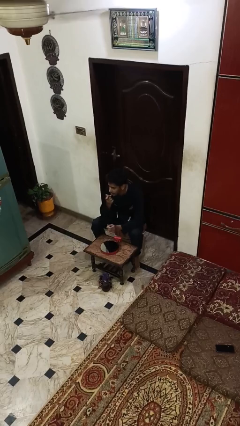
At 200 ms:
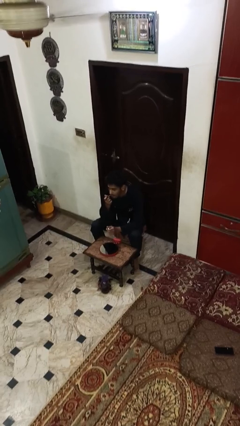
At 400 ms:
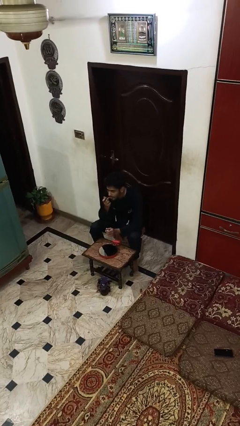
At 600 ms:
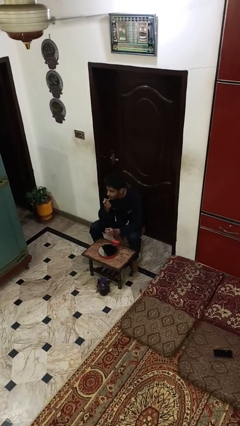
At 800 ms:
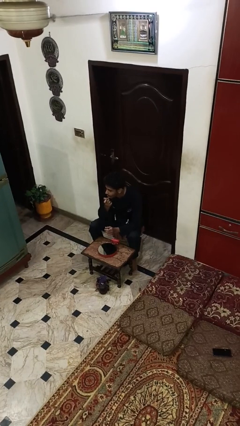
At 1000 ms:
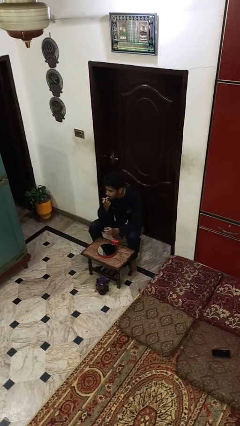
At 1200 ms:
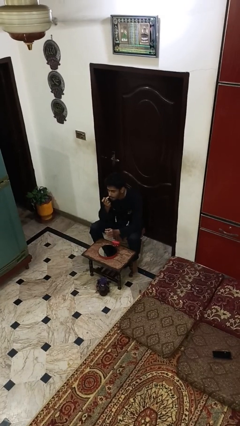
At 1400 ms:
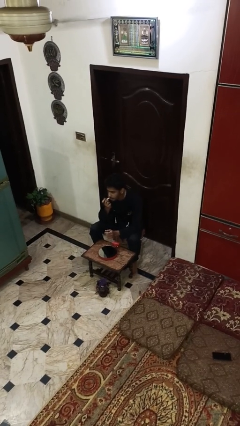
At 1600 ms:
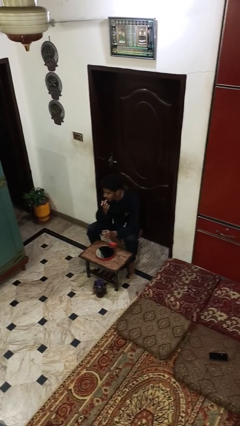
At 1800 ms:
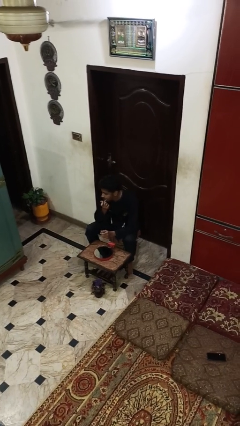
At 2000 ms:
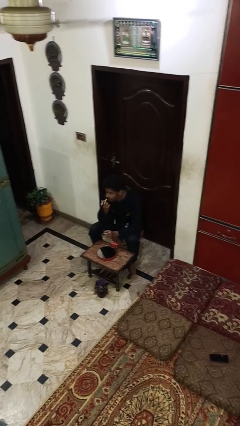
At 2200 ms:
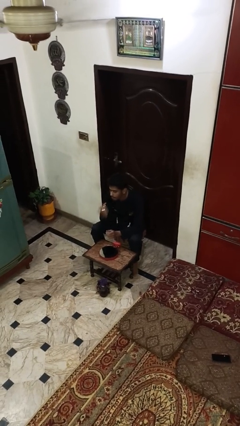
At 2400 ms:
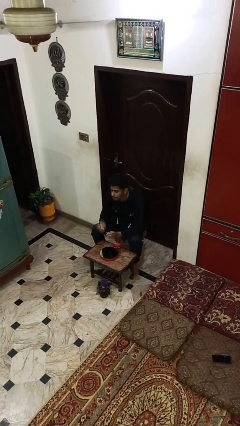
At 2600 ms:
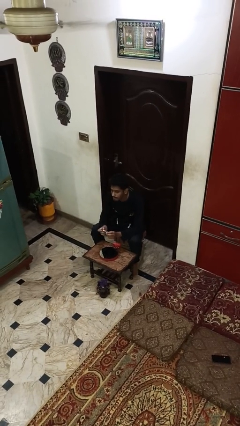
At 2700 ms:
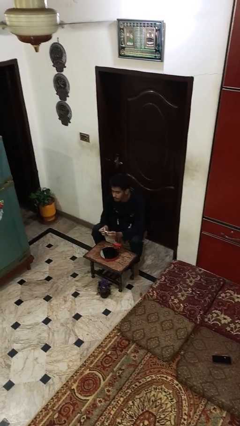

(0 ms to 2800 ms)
person applies lip makeup

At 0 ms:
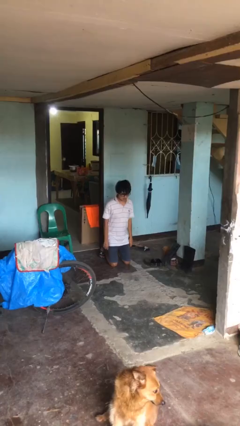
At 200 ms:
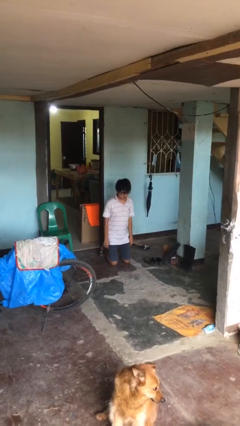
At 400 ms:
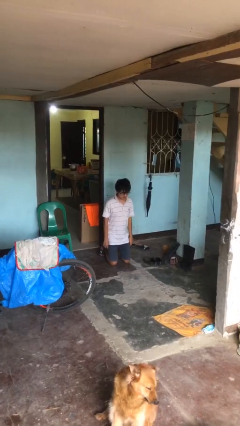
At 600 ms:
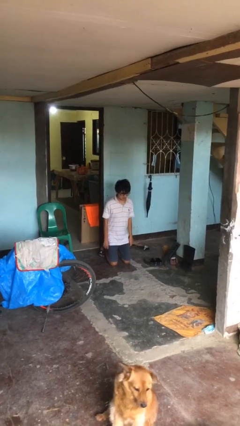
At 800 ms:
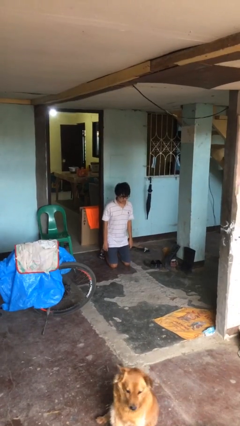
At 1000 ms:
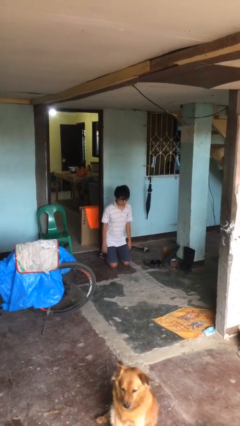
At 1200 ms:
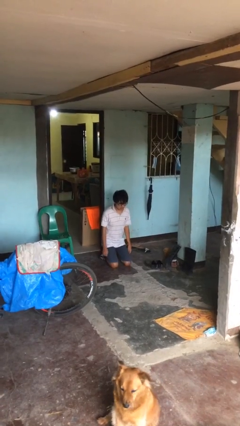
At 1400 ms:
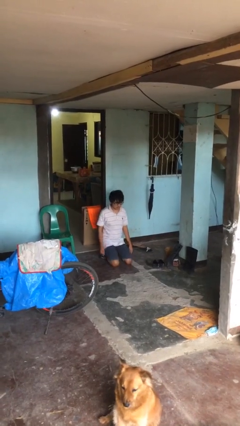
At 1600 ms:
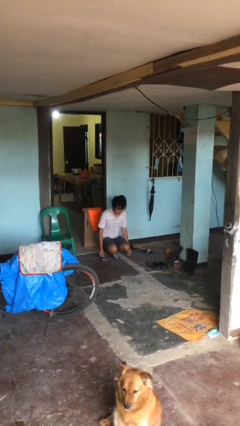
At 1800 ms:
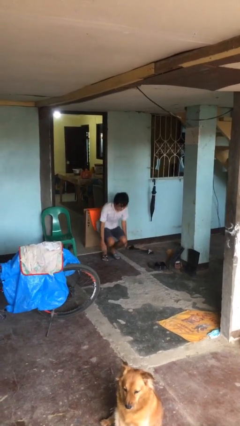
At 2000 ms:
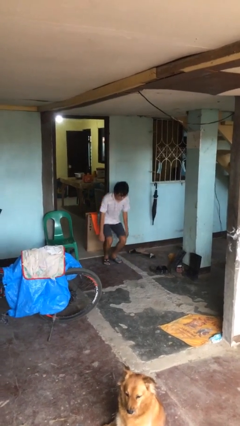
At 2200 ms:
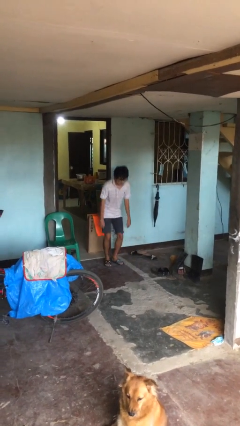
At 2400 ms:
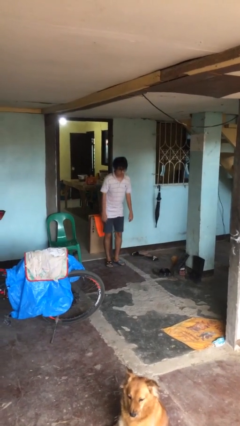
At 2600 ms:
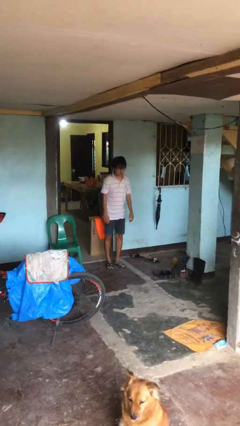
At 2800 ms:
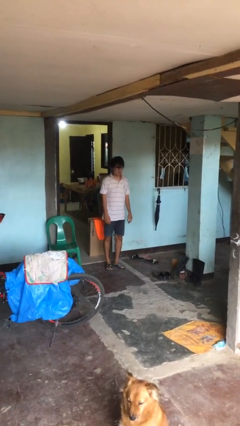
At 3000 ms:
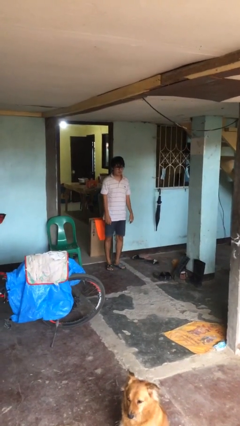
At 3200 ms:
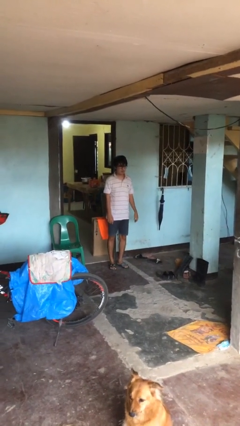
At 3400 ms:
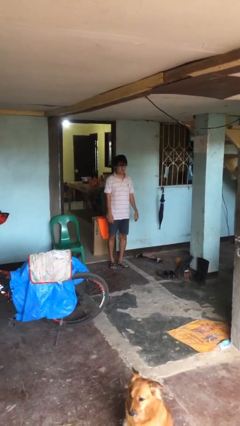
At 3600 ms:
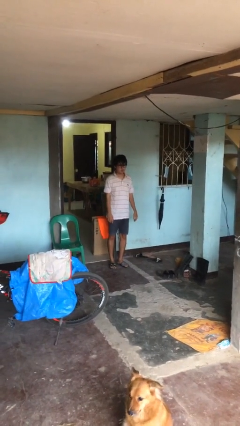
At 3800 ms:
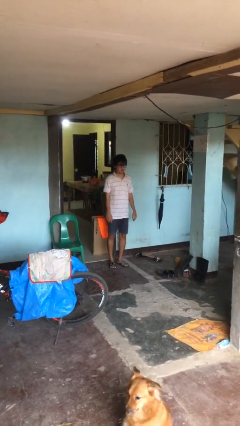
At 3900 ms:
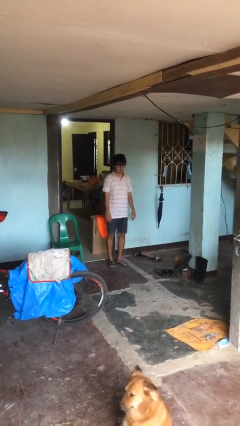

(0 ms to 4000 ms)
person stands up from floor

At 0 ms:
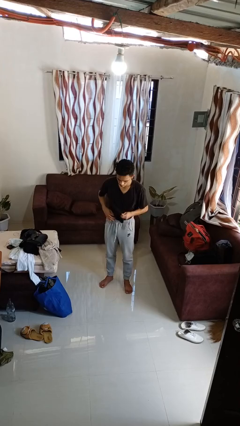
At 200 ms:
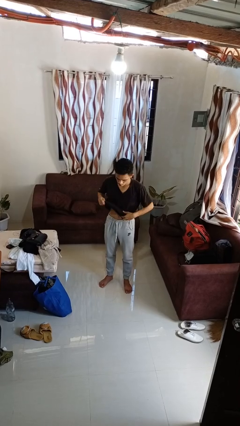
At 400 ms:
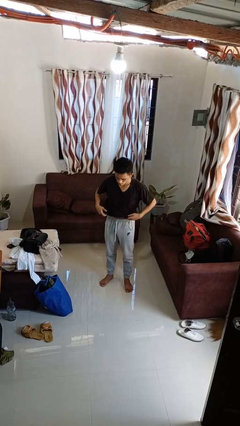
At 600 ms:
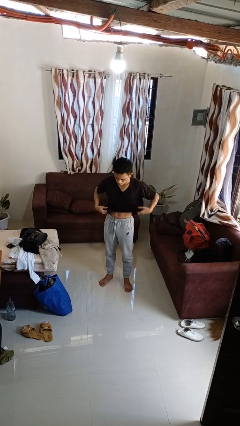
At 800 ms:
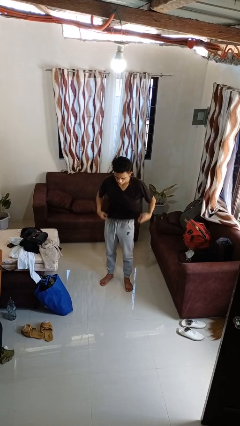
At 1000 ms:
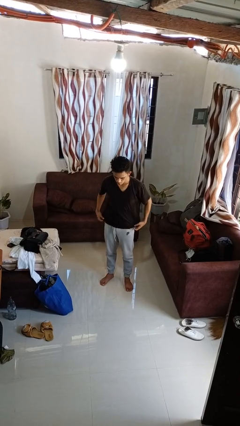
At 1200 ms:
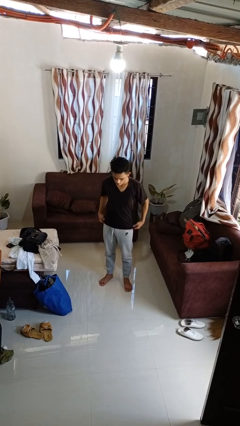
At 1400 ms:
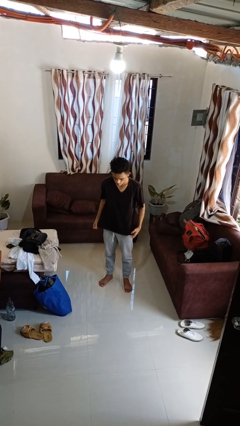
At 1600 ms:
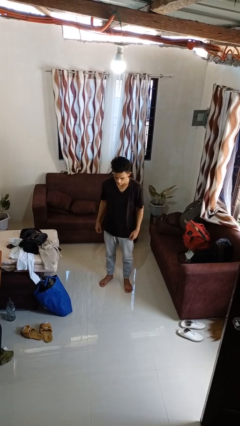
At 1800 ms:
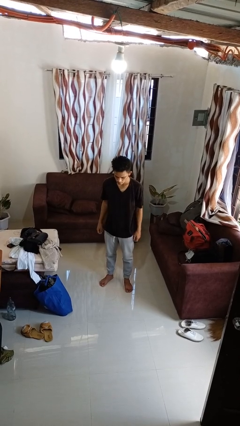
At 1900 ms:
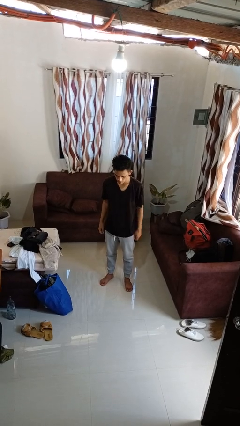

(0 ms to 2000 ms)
person untucks shirt

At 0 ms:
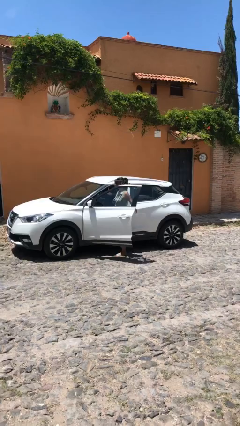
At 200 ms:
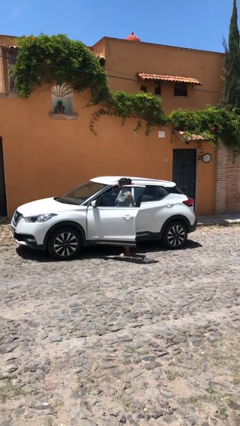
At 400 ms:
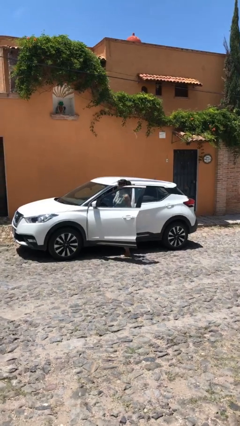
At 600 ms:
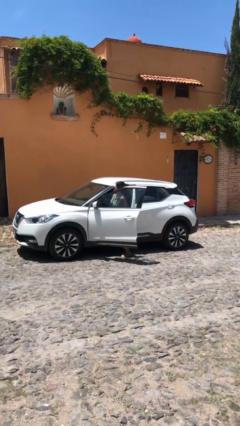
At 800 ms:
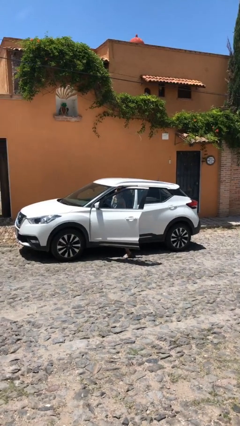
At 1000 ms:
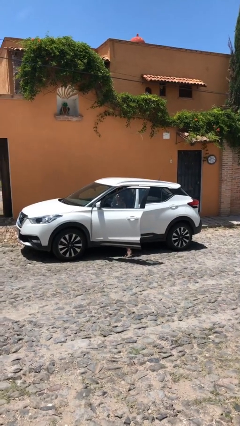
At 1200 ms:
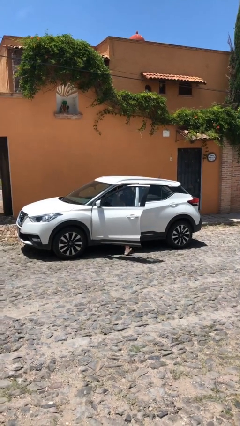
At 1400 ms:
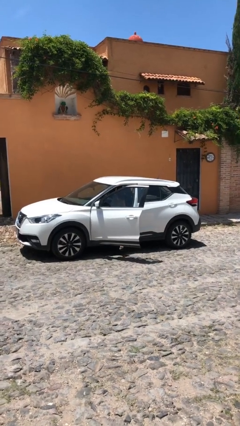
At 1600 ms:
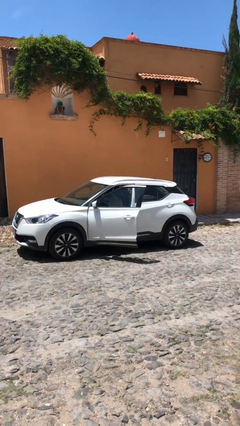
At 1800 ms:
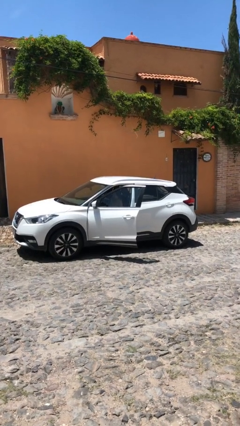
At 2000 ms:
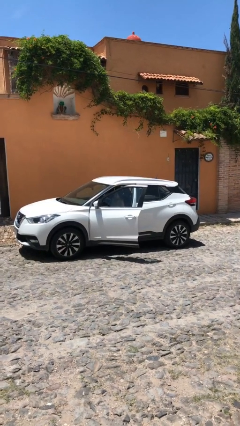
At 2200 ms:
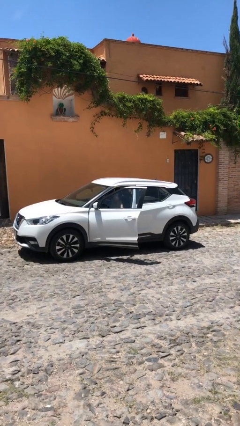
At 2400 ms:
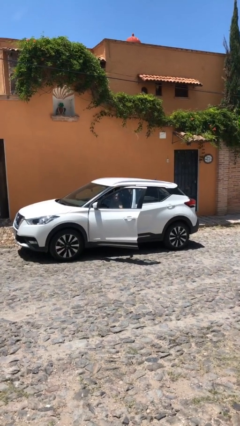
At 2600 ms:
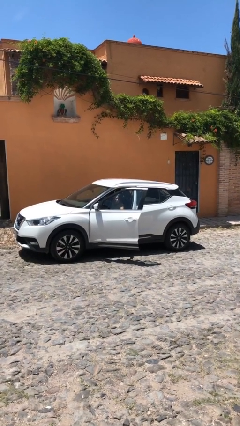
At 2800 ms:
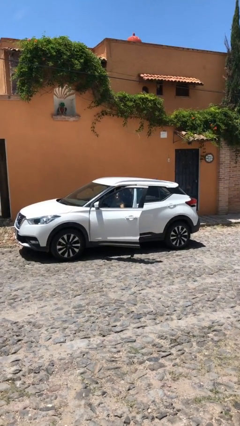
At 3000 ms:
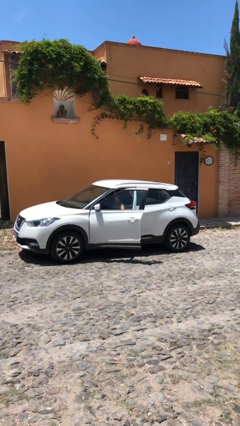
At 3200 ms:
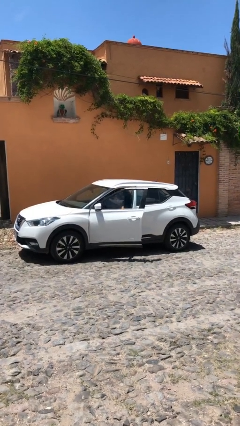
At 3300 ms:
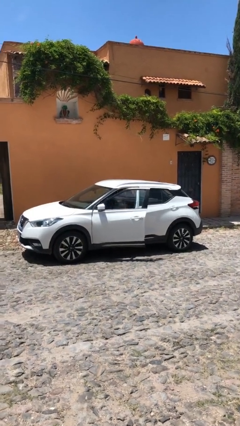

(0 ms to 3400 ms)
person enters car

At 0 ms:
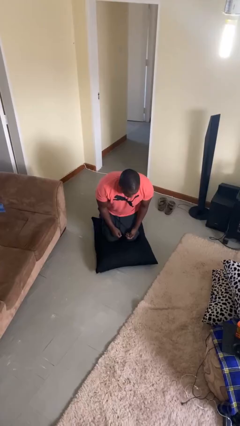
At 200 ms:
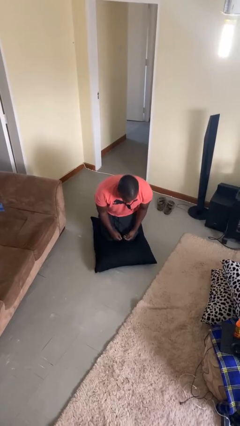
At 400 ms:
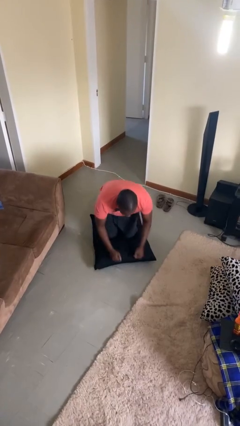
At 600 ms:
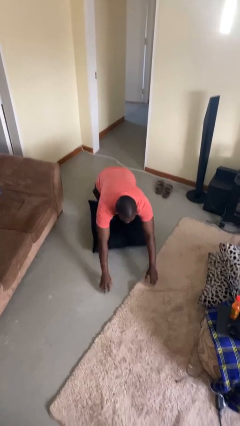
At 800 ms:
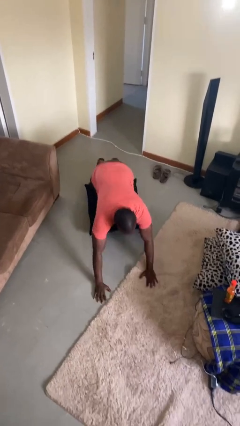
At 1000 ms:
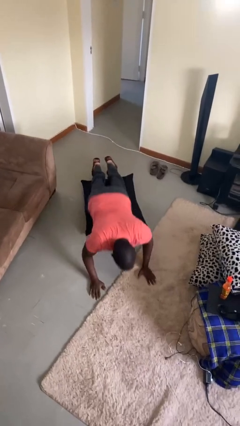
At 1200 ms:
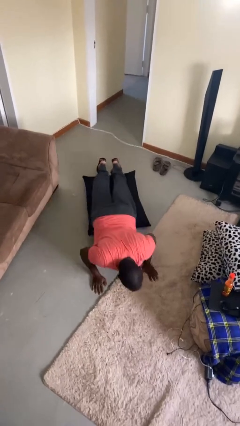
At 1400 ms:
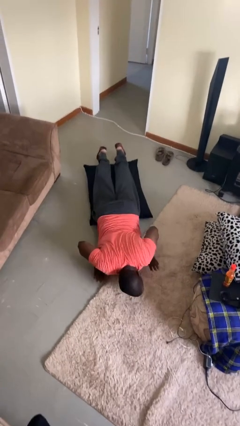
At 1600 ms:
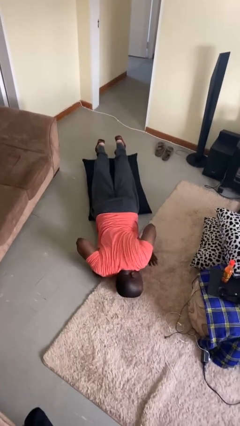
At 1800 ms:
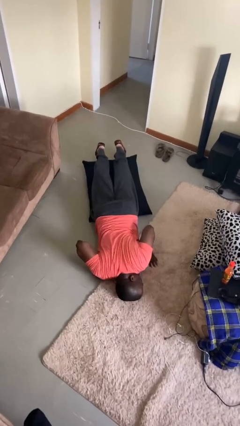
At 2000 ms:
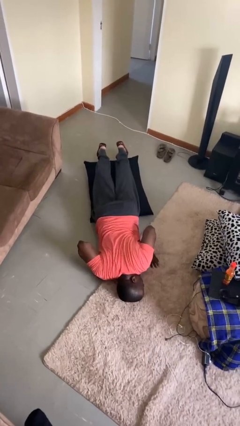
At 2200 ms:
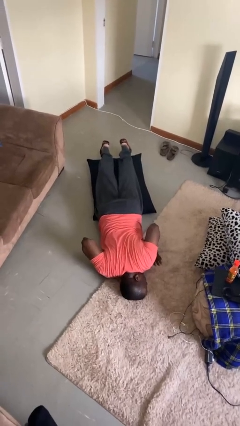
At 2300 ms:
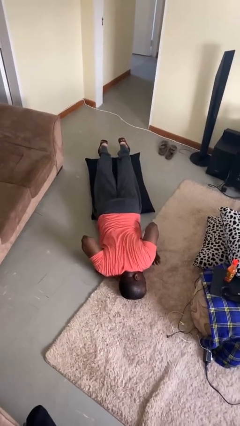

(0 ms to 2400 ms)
person lies down on floor

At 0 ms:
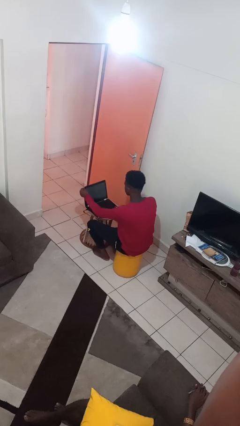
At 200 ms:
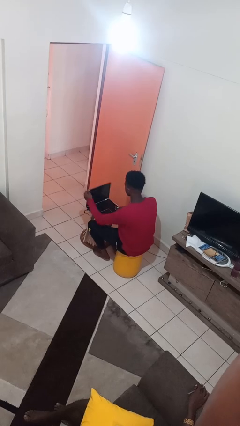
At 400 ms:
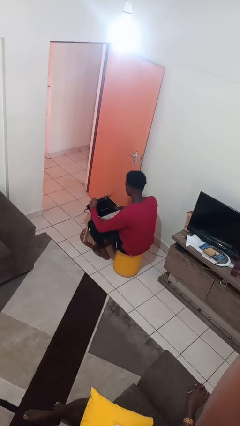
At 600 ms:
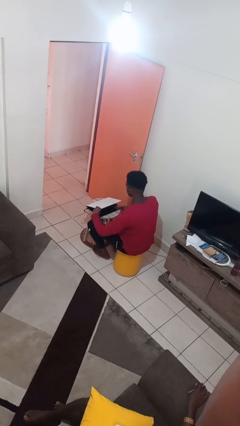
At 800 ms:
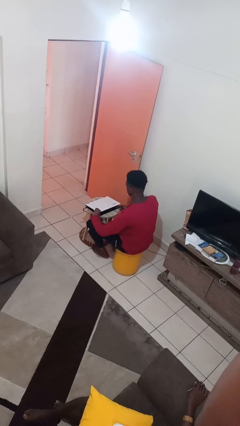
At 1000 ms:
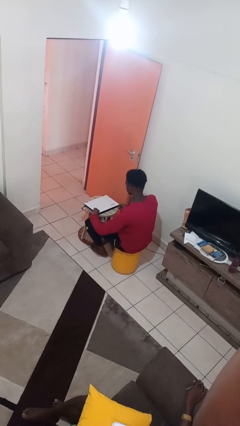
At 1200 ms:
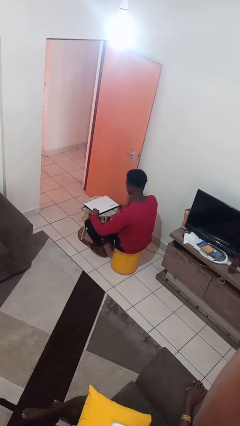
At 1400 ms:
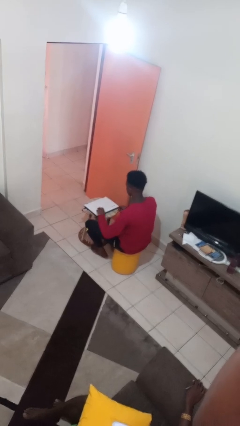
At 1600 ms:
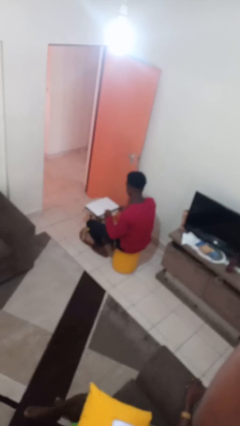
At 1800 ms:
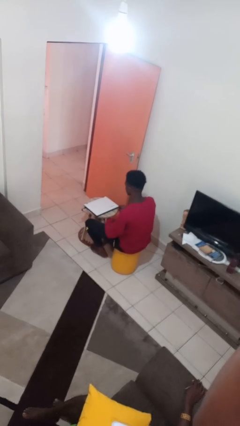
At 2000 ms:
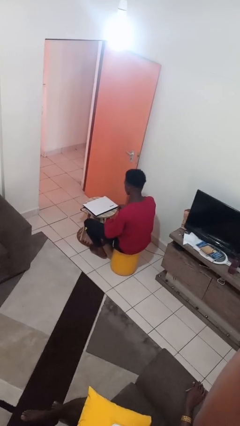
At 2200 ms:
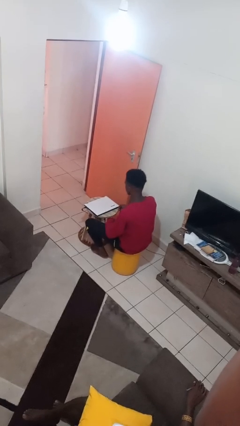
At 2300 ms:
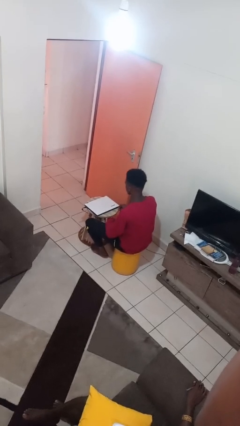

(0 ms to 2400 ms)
person closes laptop

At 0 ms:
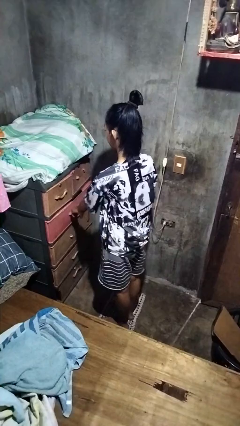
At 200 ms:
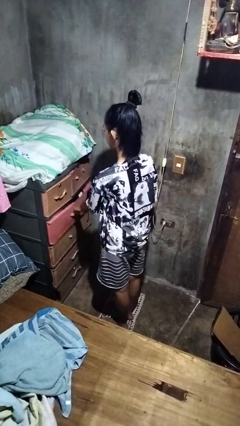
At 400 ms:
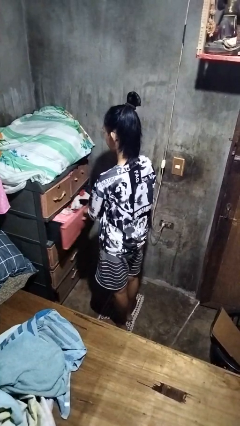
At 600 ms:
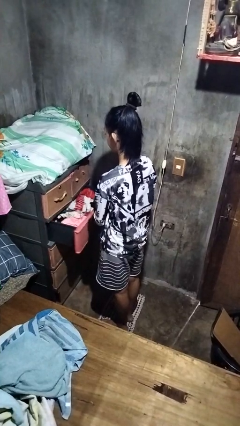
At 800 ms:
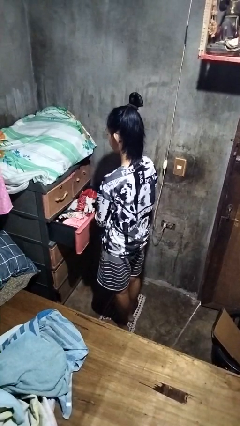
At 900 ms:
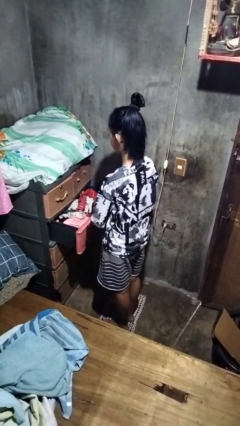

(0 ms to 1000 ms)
person opens dresser drawer
